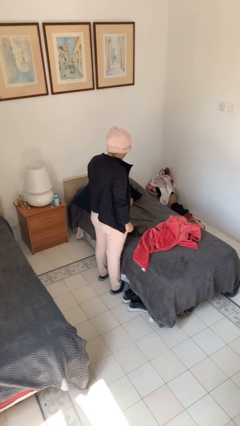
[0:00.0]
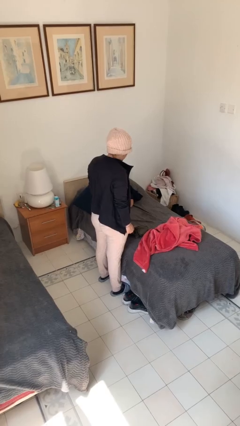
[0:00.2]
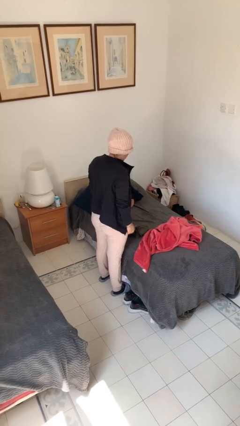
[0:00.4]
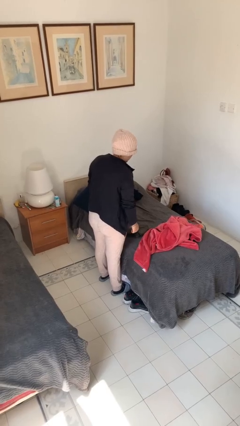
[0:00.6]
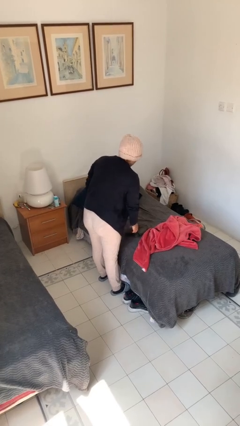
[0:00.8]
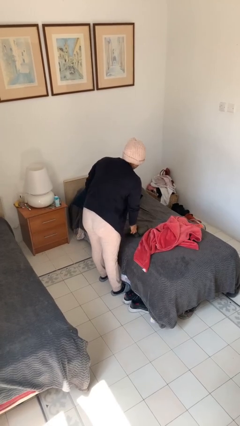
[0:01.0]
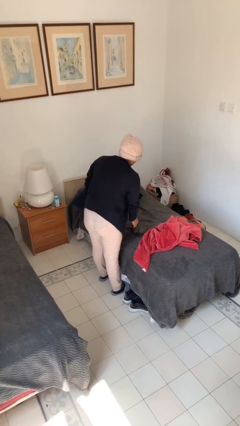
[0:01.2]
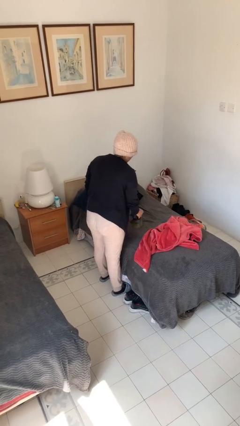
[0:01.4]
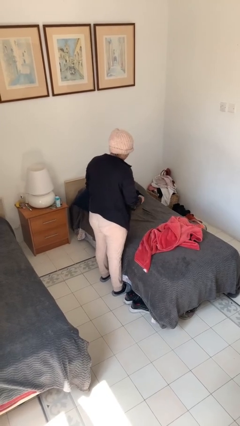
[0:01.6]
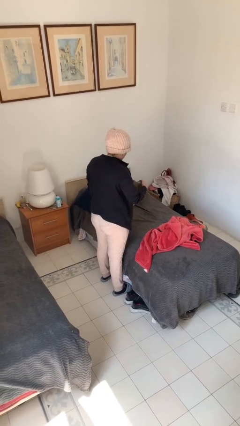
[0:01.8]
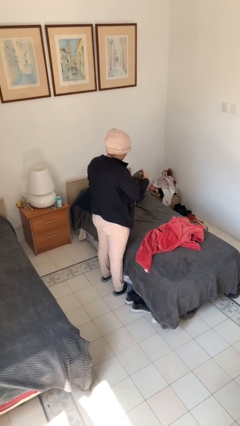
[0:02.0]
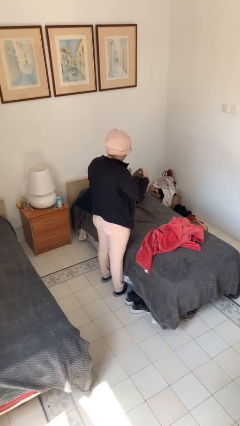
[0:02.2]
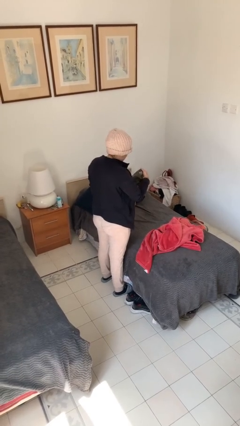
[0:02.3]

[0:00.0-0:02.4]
person picks up object from couch

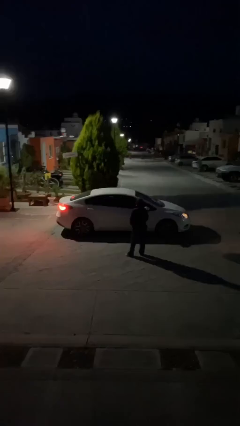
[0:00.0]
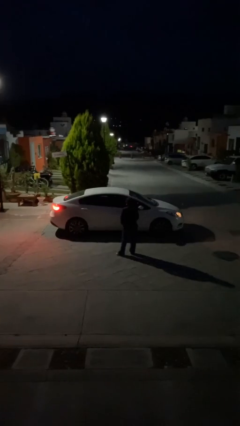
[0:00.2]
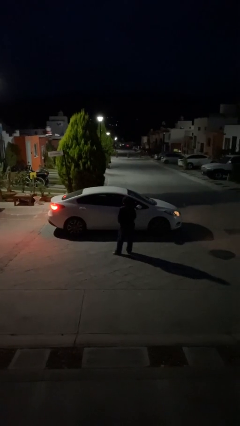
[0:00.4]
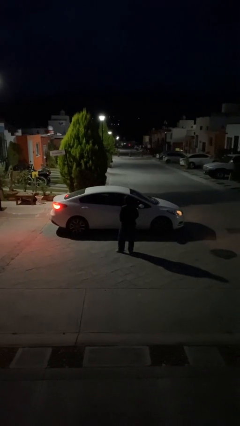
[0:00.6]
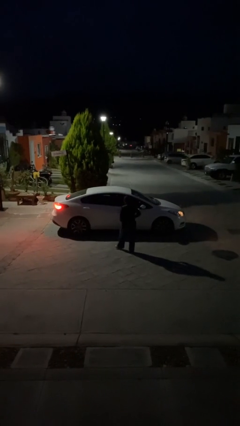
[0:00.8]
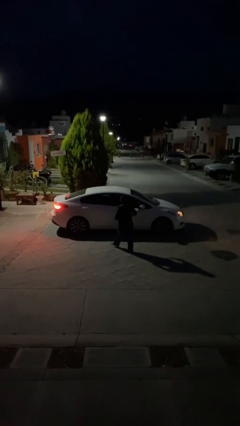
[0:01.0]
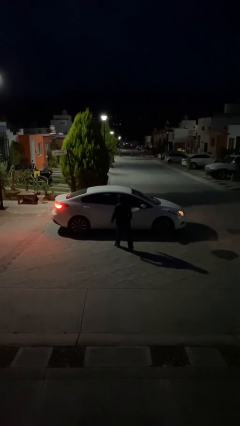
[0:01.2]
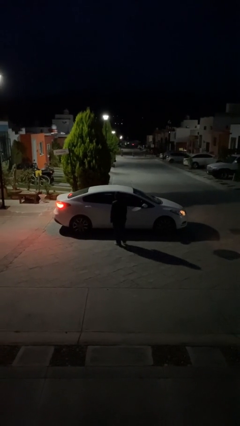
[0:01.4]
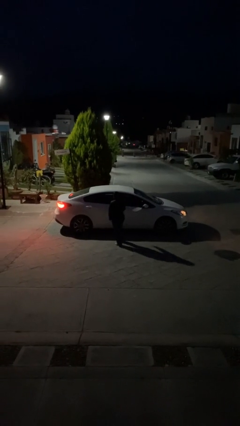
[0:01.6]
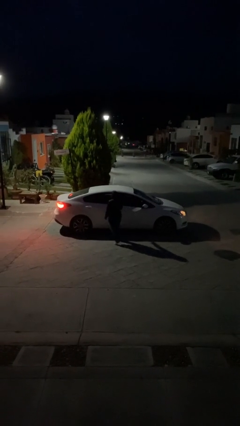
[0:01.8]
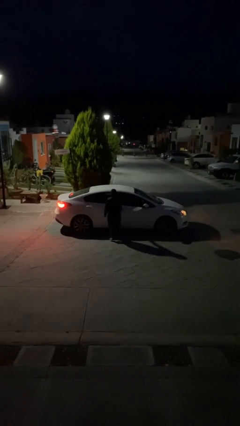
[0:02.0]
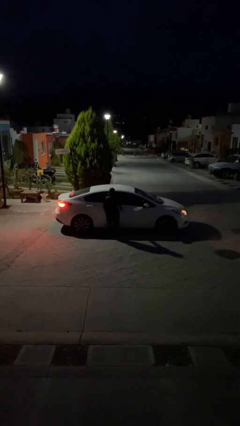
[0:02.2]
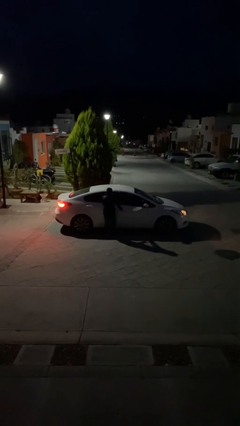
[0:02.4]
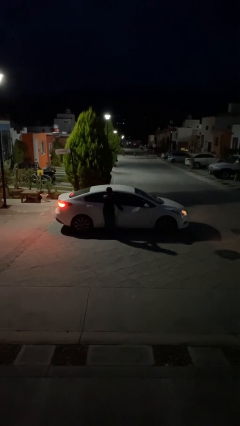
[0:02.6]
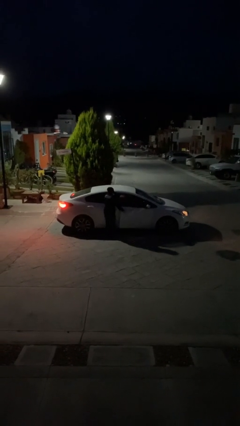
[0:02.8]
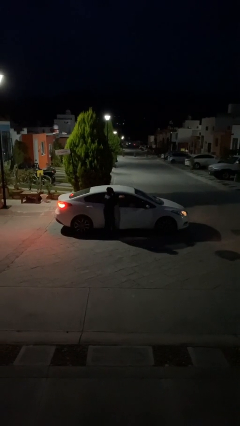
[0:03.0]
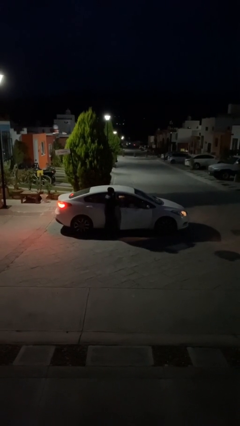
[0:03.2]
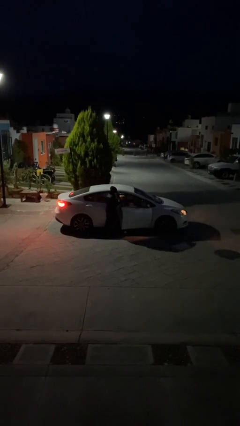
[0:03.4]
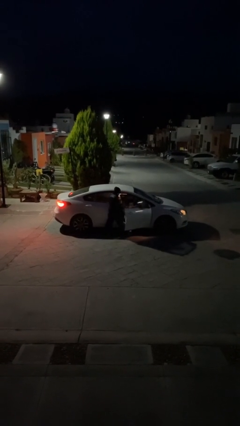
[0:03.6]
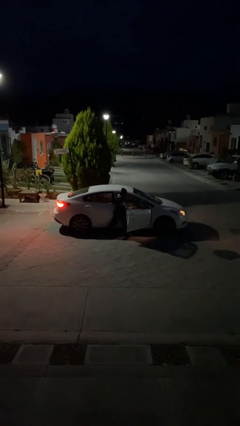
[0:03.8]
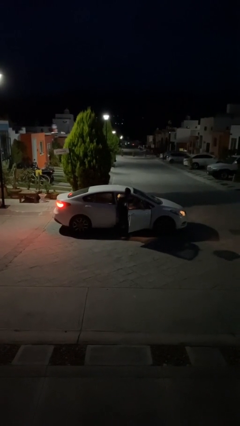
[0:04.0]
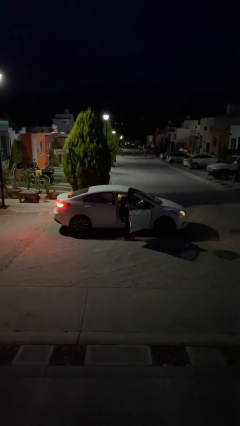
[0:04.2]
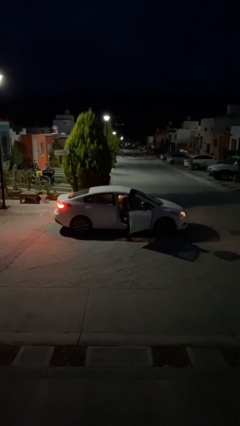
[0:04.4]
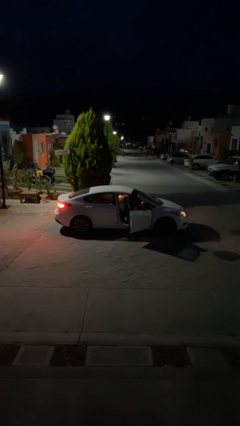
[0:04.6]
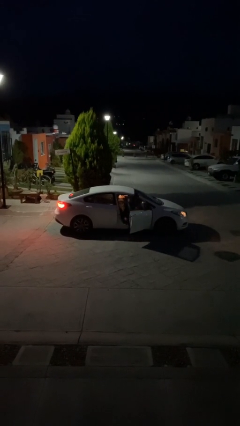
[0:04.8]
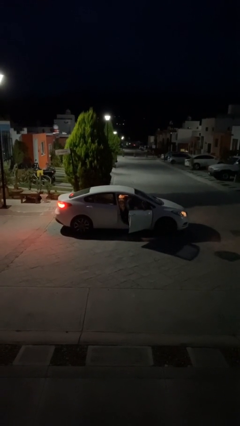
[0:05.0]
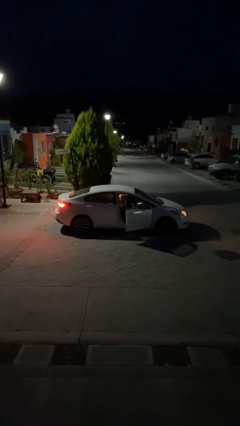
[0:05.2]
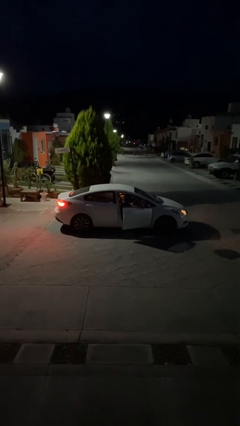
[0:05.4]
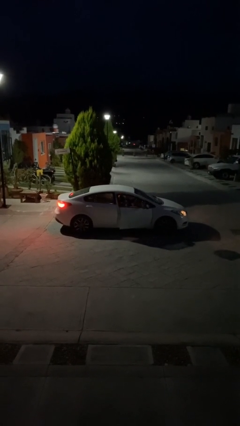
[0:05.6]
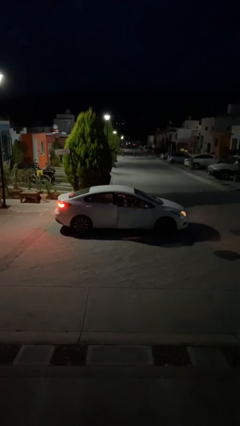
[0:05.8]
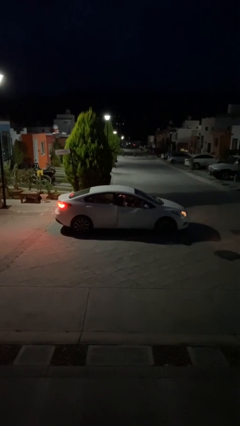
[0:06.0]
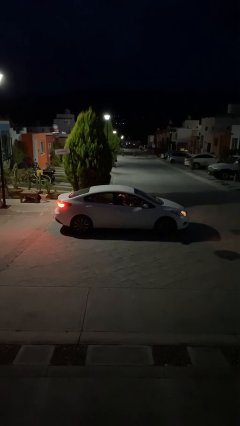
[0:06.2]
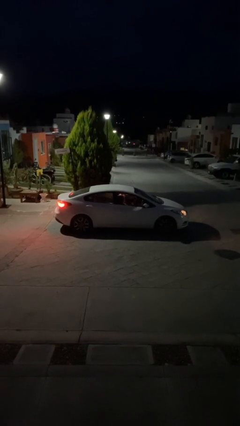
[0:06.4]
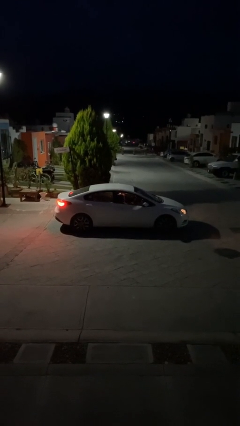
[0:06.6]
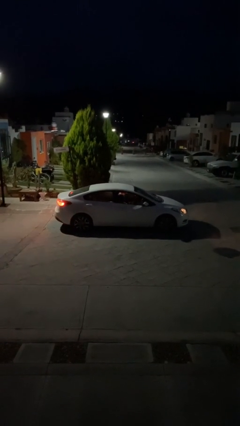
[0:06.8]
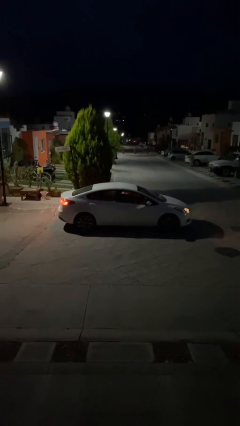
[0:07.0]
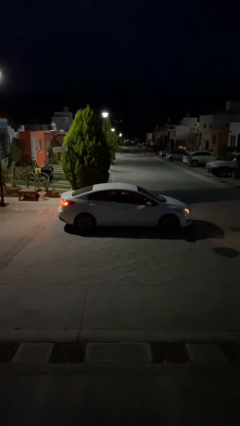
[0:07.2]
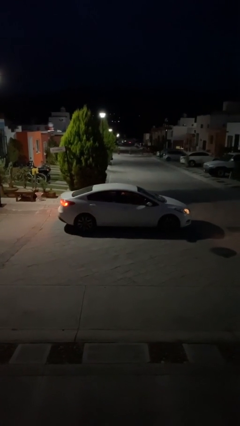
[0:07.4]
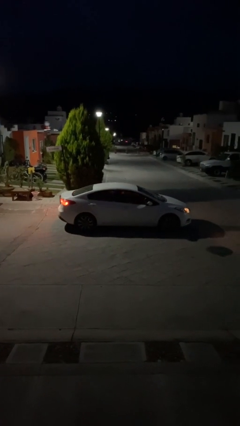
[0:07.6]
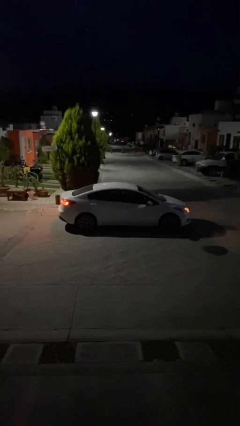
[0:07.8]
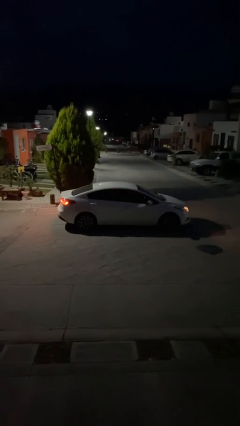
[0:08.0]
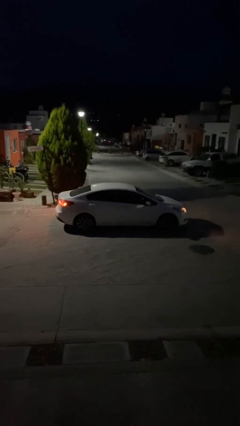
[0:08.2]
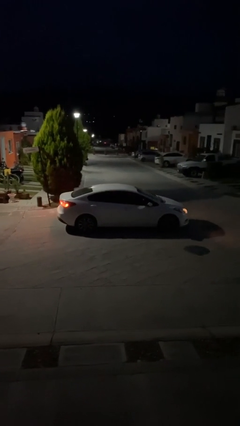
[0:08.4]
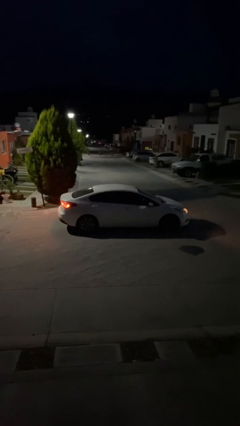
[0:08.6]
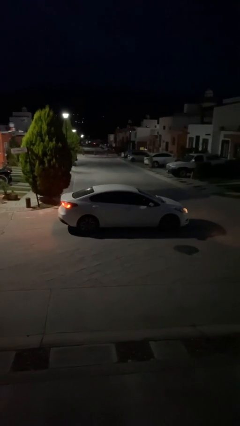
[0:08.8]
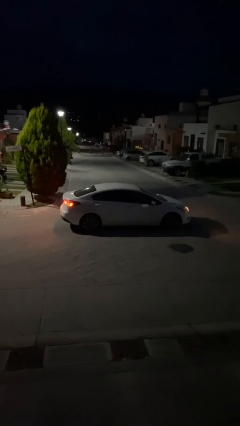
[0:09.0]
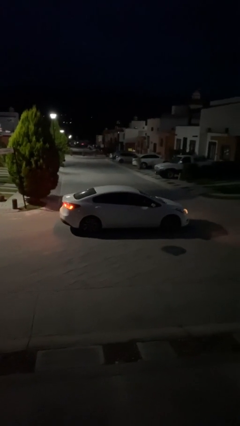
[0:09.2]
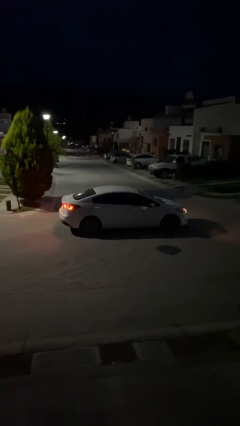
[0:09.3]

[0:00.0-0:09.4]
car picks up person

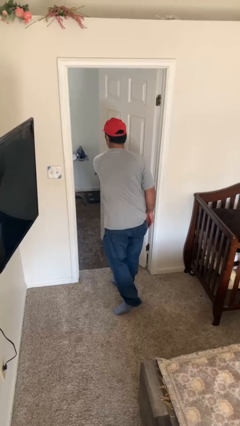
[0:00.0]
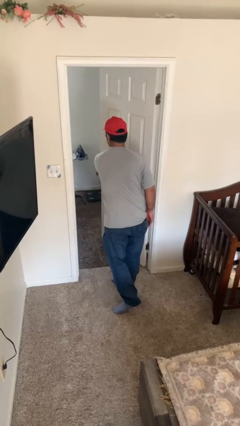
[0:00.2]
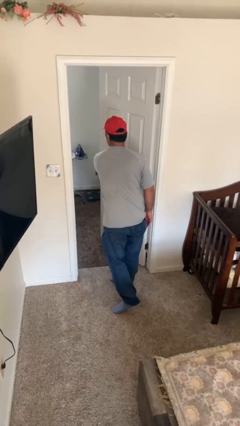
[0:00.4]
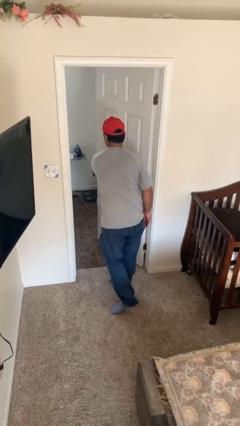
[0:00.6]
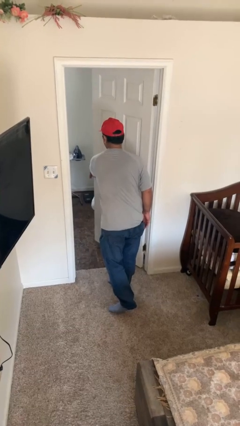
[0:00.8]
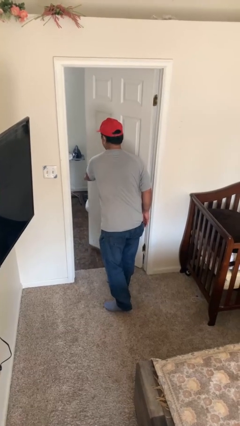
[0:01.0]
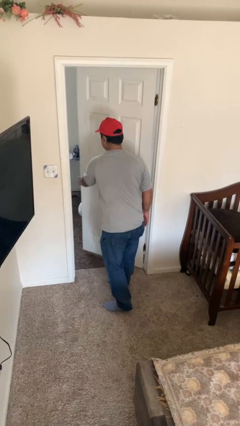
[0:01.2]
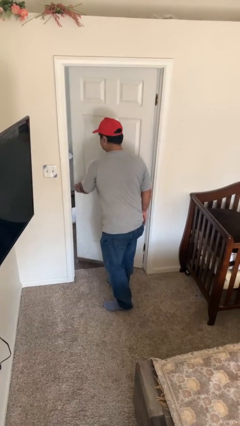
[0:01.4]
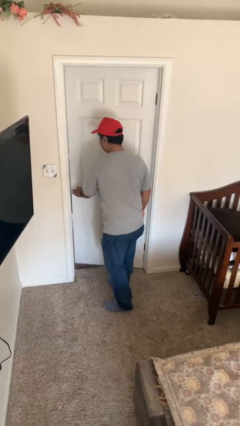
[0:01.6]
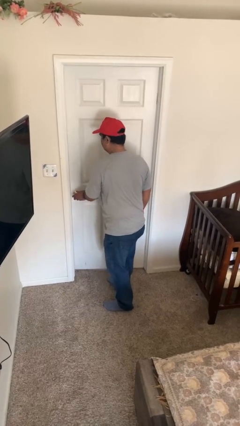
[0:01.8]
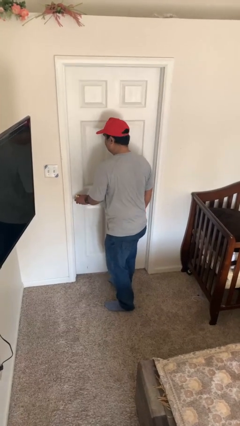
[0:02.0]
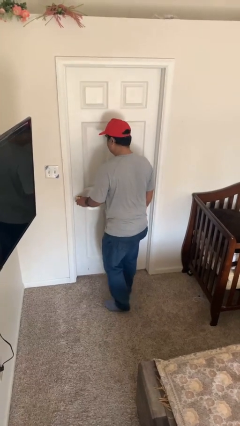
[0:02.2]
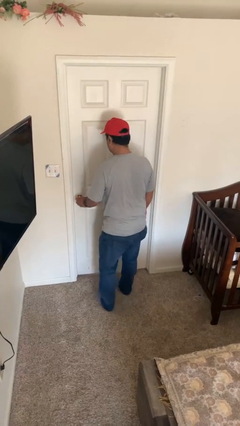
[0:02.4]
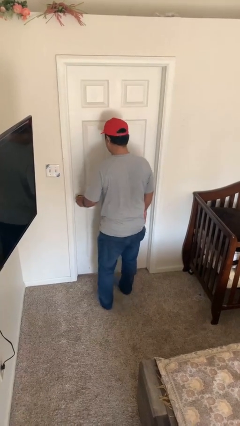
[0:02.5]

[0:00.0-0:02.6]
person closes facility door

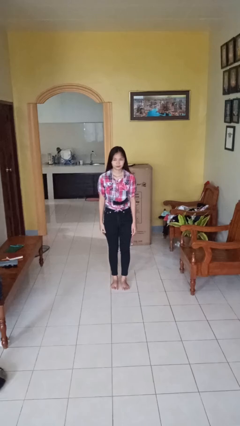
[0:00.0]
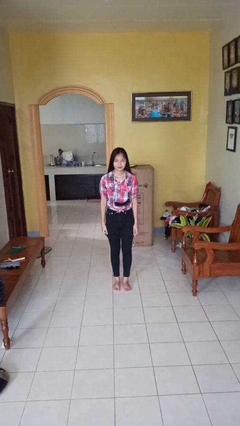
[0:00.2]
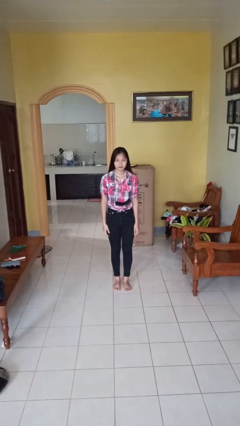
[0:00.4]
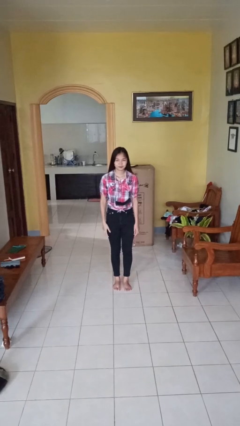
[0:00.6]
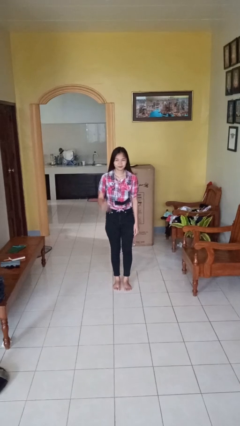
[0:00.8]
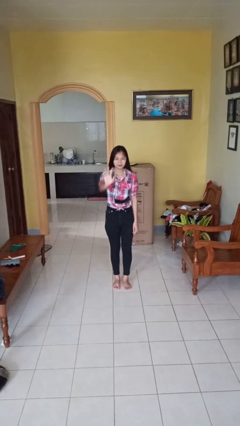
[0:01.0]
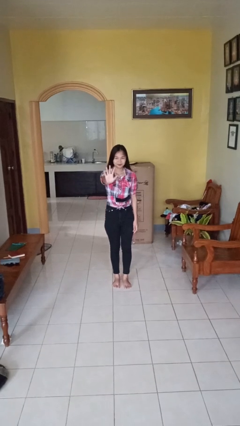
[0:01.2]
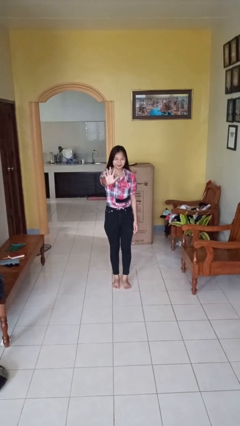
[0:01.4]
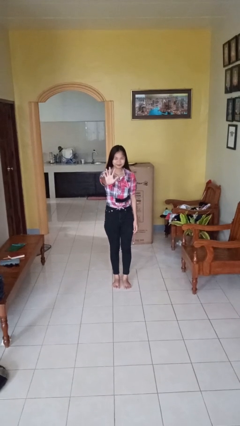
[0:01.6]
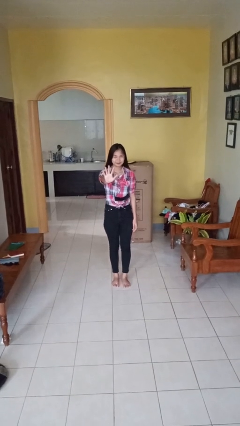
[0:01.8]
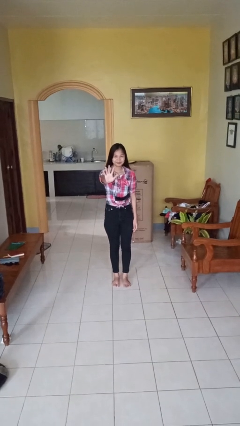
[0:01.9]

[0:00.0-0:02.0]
person gestures number five

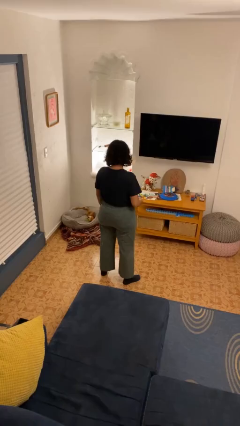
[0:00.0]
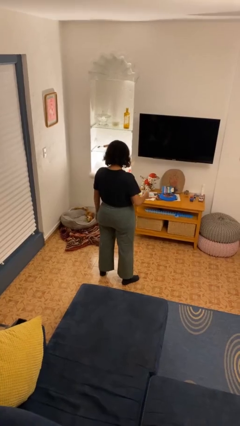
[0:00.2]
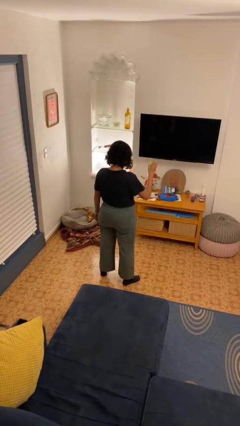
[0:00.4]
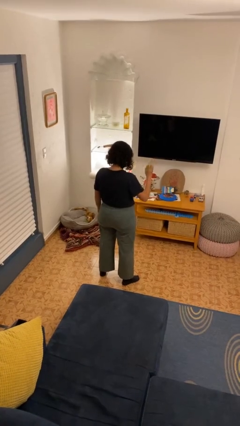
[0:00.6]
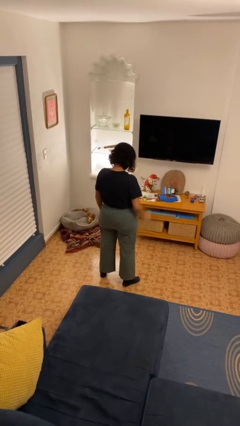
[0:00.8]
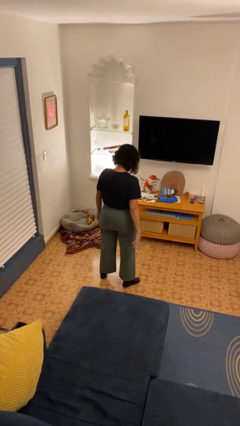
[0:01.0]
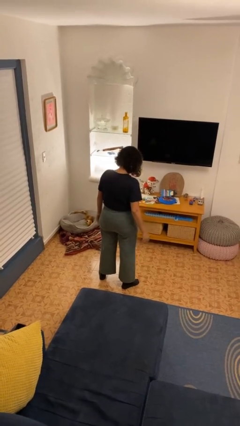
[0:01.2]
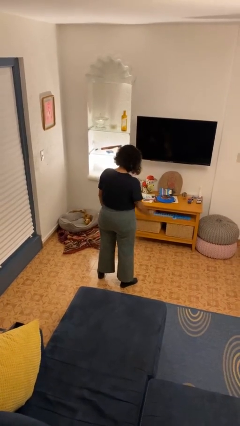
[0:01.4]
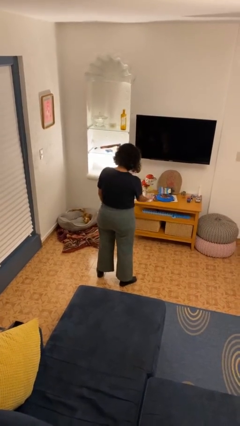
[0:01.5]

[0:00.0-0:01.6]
person bounces ball on floor
